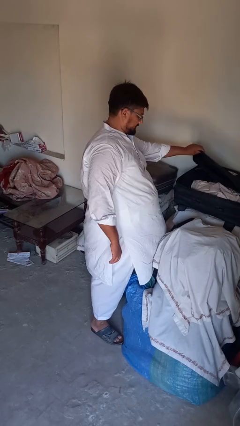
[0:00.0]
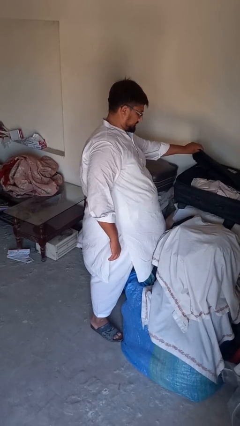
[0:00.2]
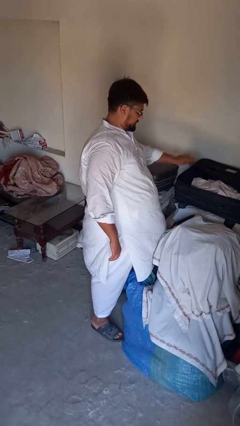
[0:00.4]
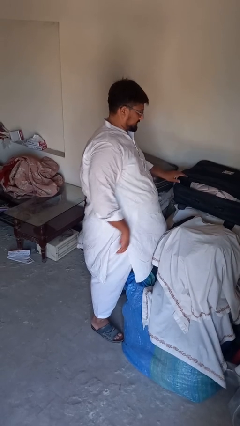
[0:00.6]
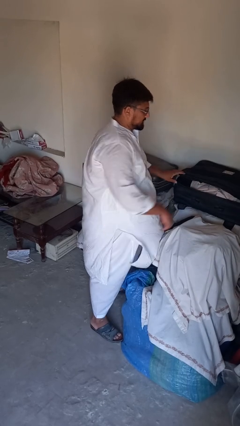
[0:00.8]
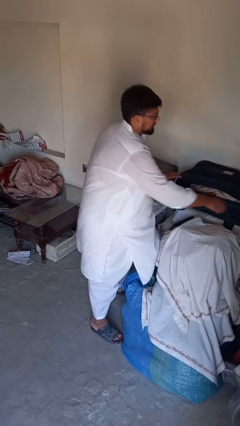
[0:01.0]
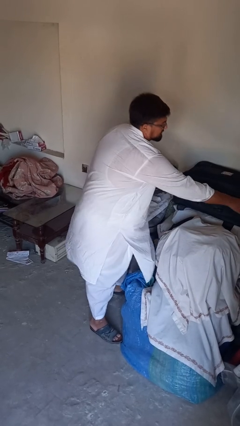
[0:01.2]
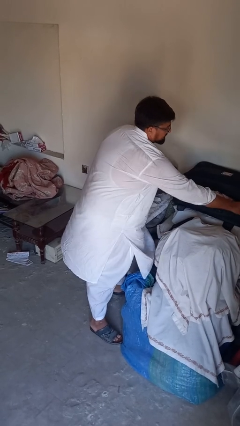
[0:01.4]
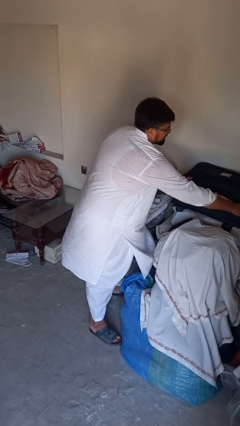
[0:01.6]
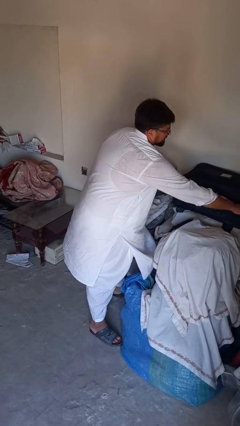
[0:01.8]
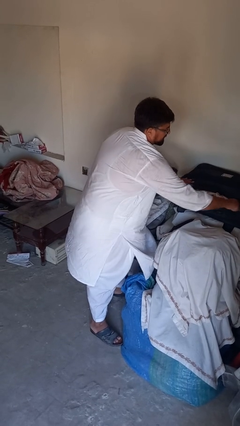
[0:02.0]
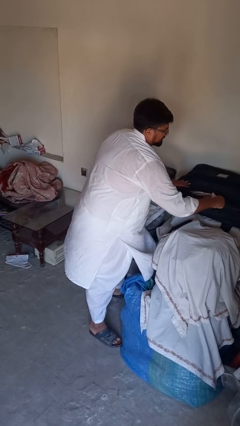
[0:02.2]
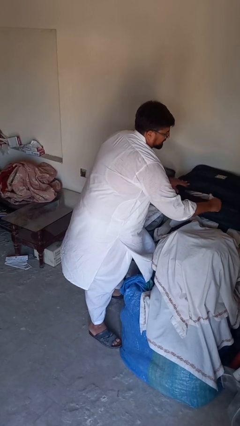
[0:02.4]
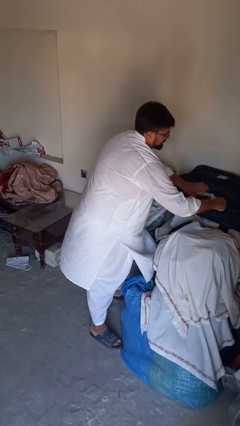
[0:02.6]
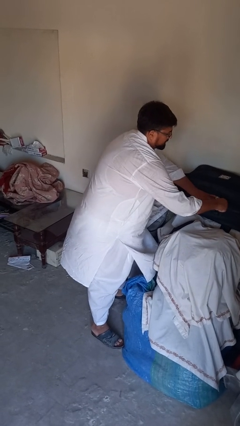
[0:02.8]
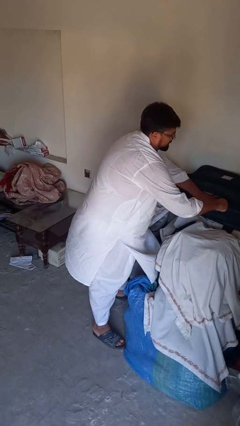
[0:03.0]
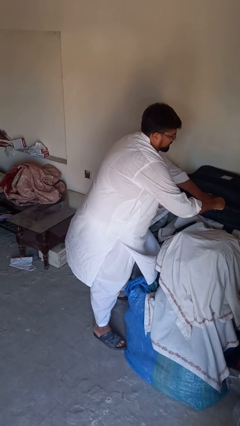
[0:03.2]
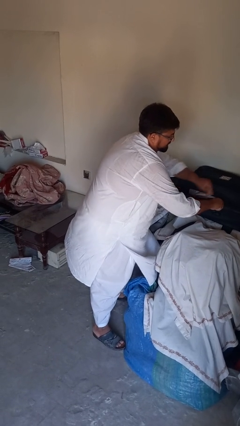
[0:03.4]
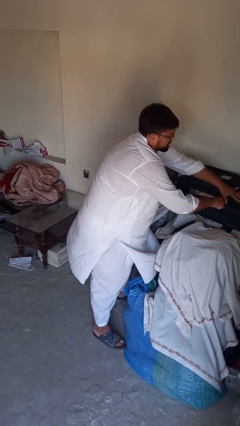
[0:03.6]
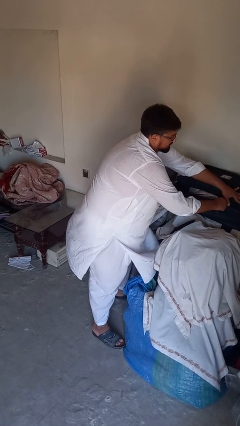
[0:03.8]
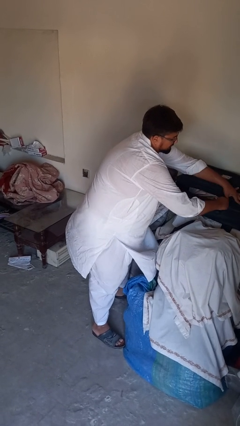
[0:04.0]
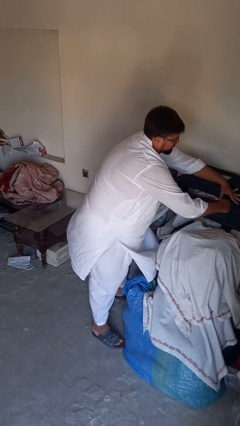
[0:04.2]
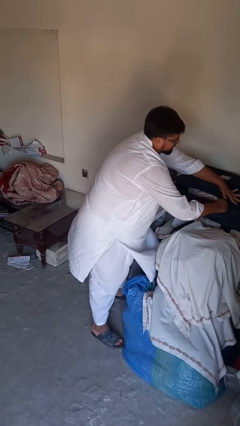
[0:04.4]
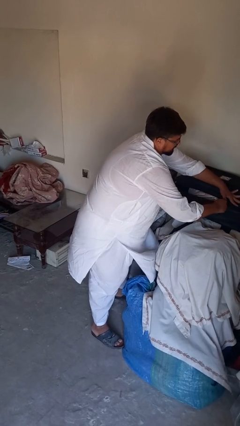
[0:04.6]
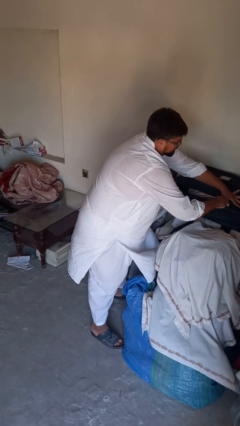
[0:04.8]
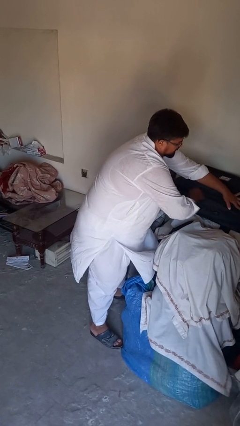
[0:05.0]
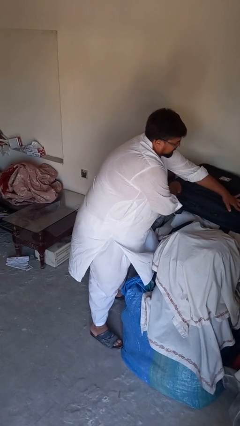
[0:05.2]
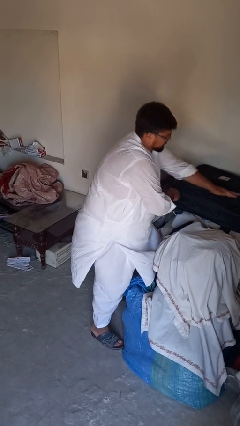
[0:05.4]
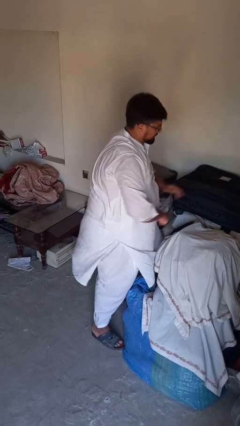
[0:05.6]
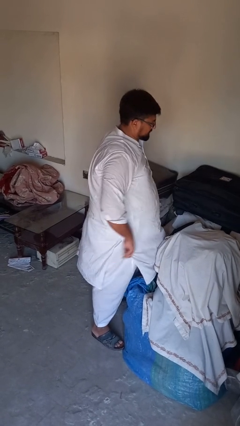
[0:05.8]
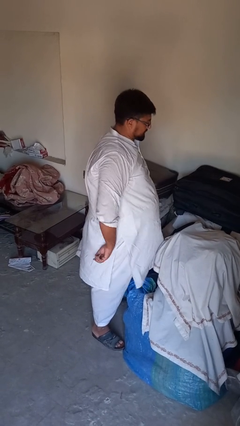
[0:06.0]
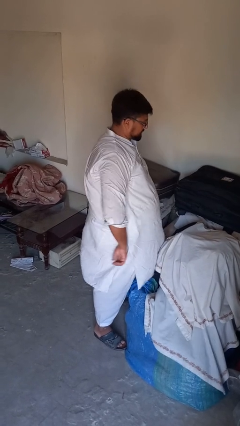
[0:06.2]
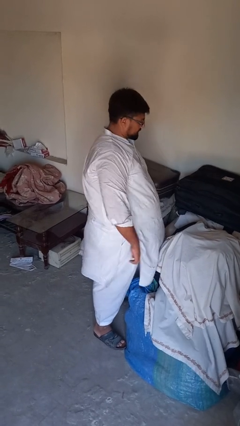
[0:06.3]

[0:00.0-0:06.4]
person closes suitcase

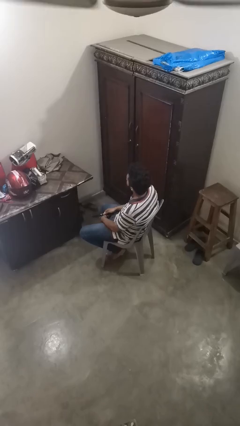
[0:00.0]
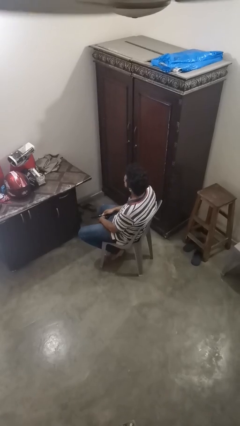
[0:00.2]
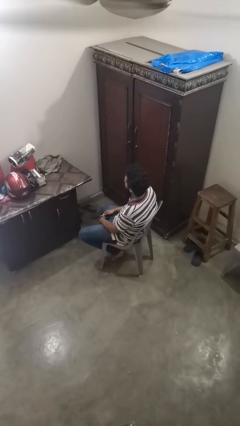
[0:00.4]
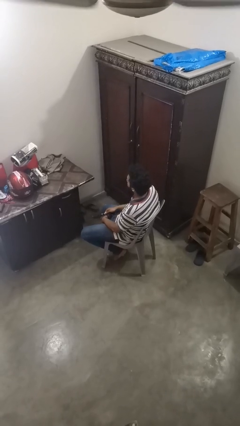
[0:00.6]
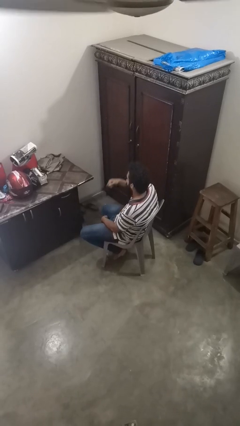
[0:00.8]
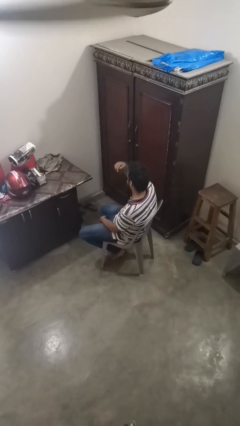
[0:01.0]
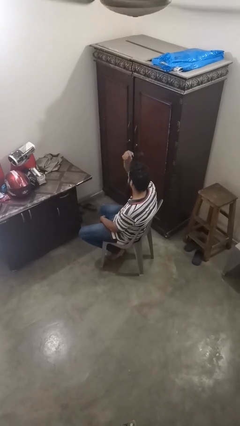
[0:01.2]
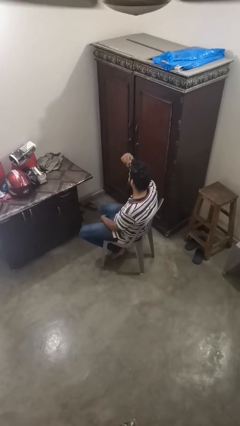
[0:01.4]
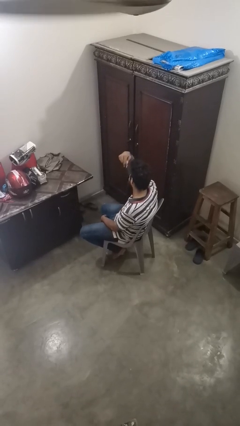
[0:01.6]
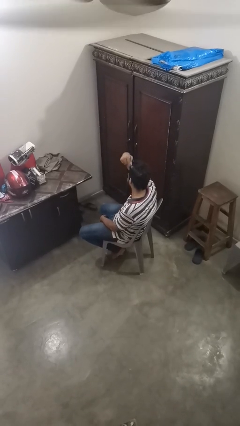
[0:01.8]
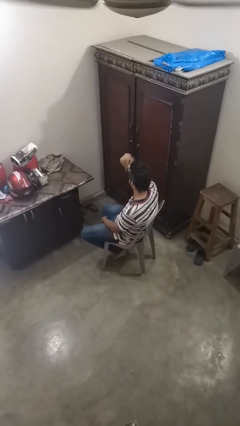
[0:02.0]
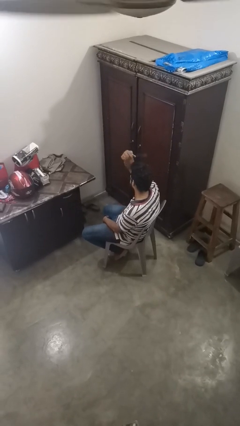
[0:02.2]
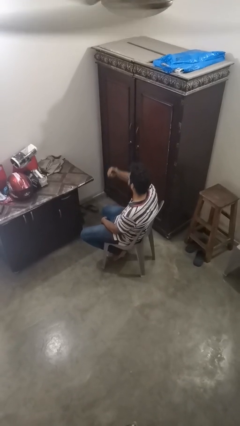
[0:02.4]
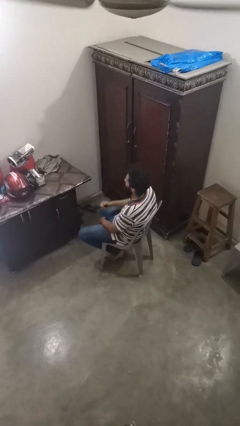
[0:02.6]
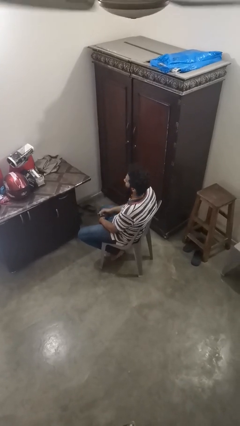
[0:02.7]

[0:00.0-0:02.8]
person brushes hair

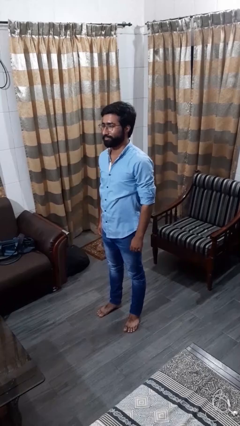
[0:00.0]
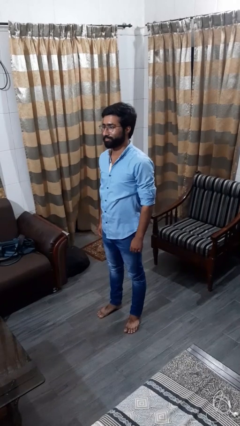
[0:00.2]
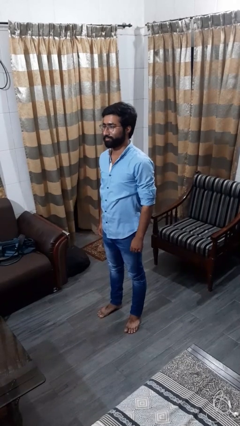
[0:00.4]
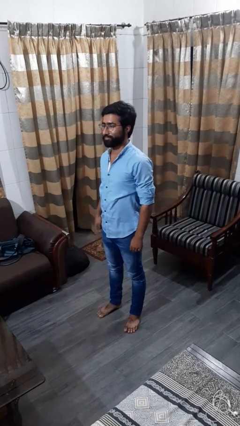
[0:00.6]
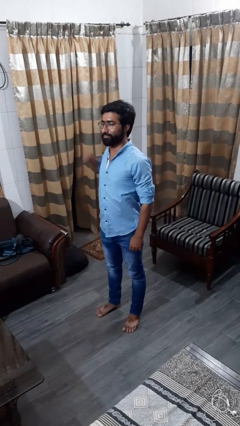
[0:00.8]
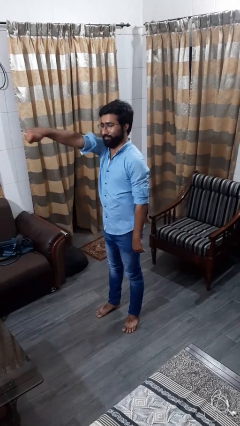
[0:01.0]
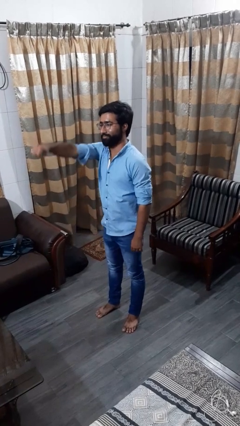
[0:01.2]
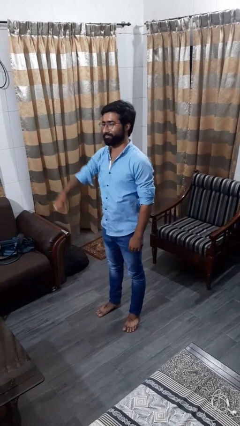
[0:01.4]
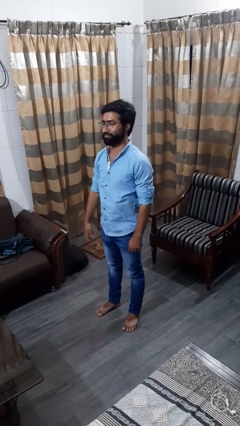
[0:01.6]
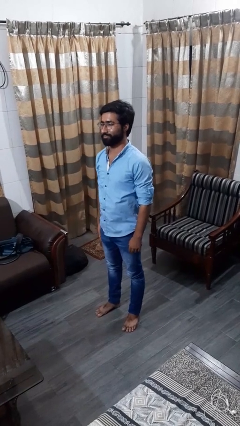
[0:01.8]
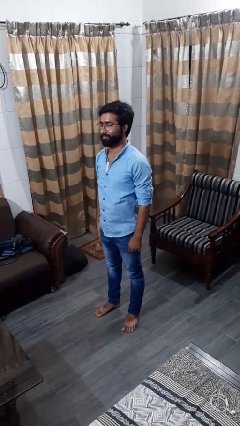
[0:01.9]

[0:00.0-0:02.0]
person punches

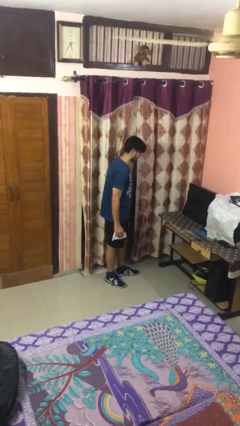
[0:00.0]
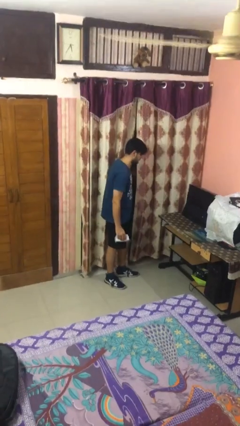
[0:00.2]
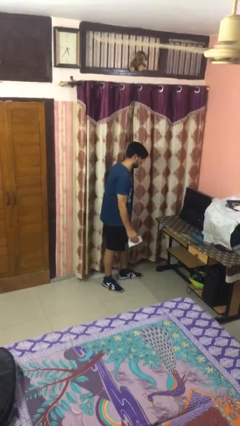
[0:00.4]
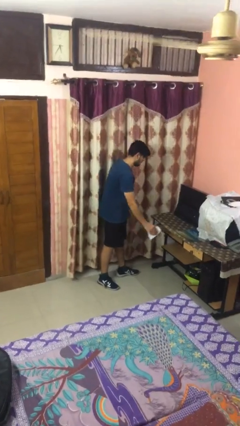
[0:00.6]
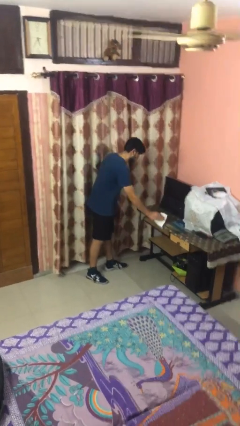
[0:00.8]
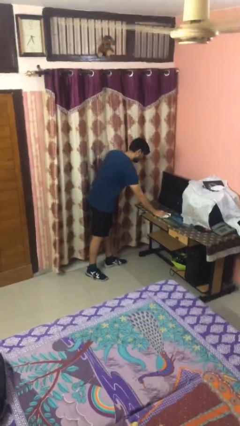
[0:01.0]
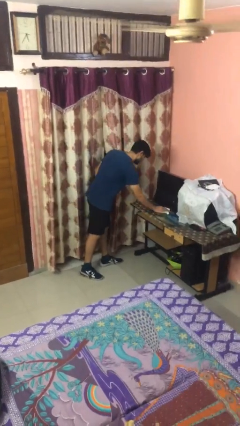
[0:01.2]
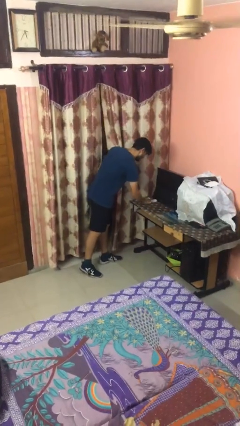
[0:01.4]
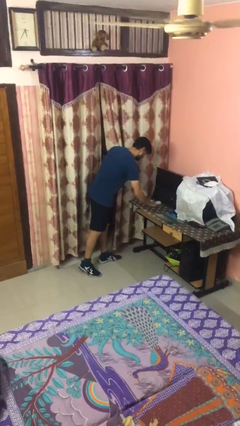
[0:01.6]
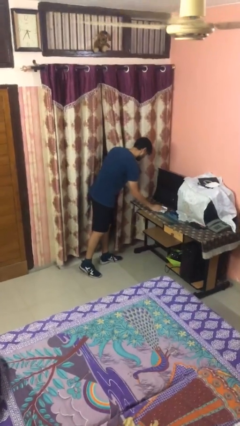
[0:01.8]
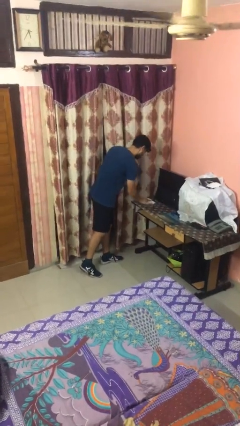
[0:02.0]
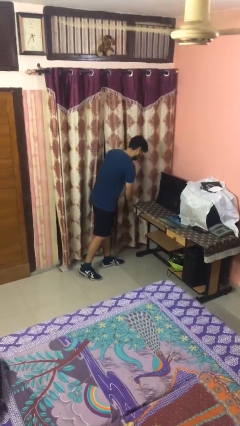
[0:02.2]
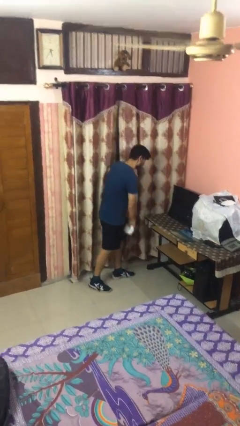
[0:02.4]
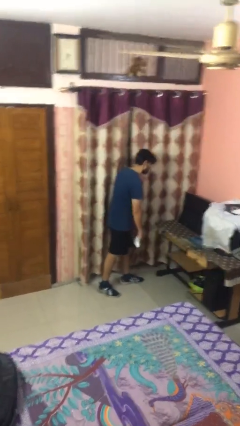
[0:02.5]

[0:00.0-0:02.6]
person cleans table with rag

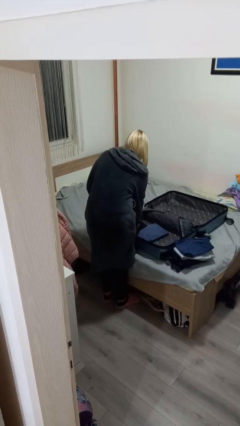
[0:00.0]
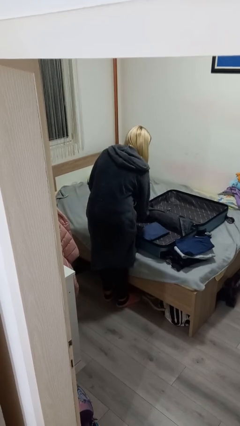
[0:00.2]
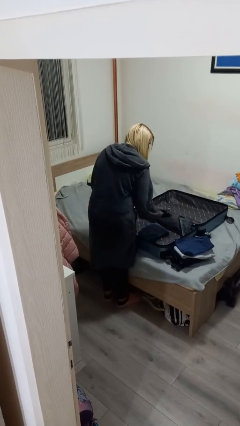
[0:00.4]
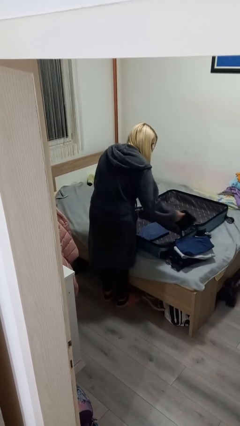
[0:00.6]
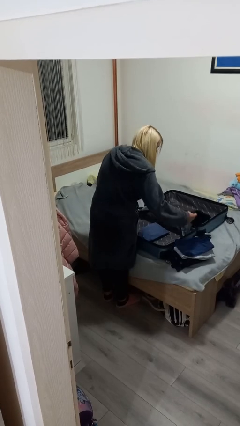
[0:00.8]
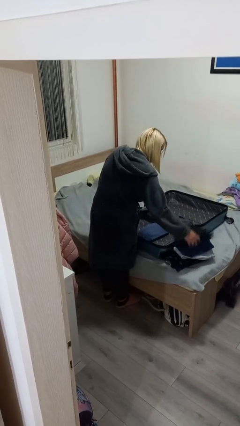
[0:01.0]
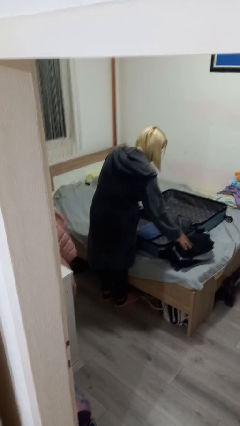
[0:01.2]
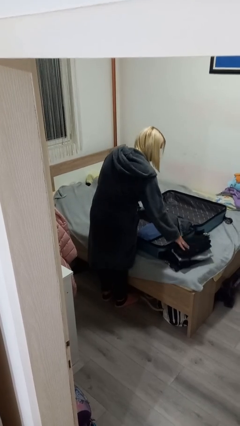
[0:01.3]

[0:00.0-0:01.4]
person unloads clothes from suitcase

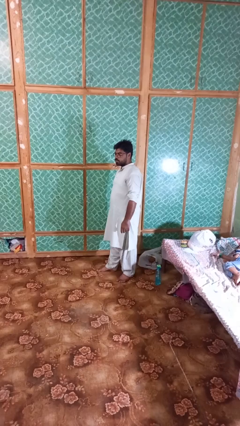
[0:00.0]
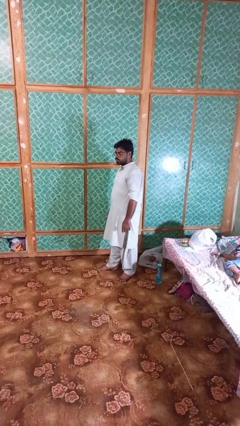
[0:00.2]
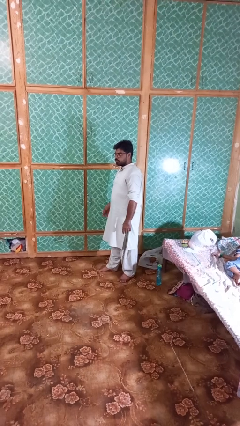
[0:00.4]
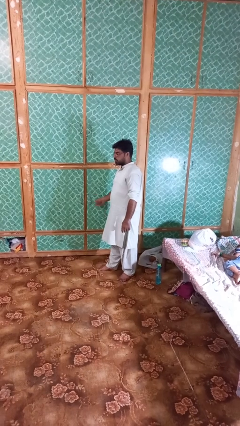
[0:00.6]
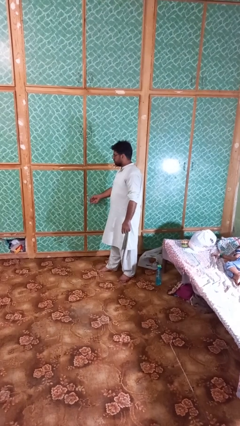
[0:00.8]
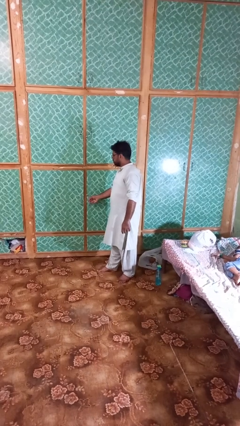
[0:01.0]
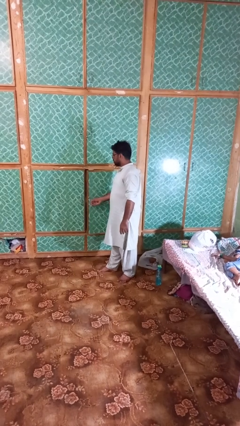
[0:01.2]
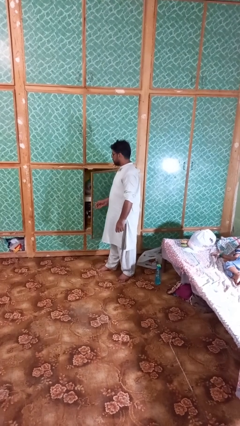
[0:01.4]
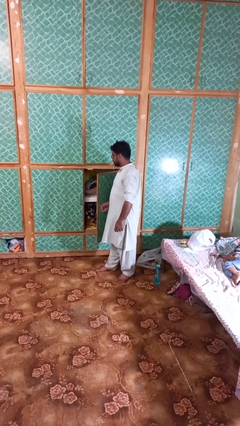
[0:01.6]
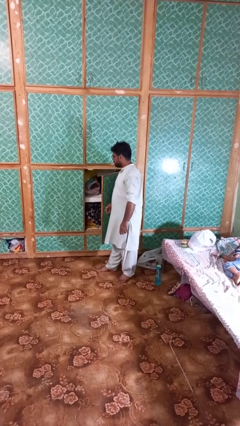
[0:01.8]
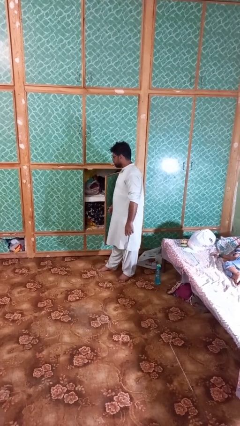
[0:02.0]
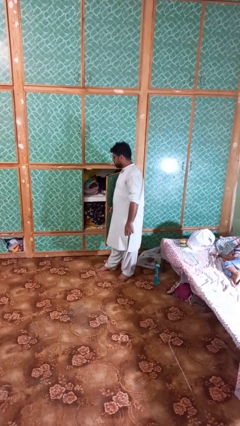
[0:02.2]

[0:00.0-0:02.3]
person opens closet door
